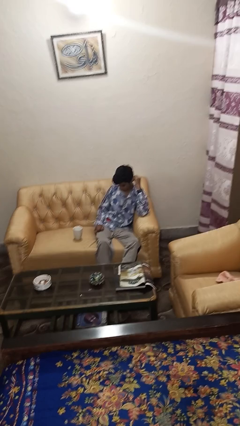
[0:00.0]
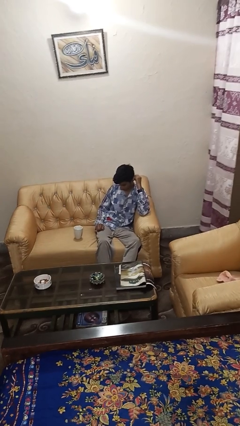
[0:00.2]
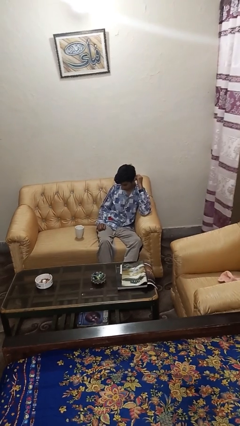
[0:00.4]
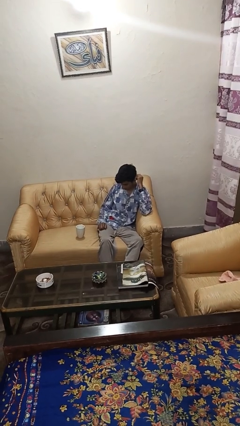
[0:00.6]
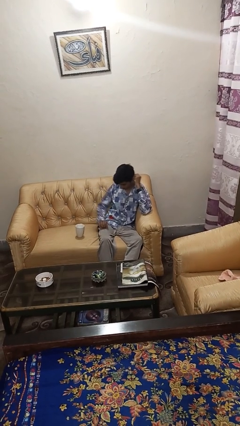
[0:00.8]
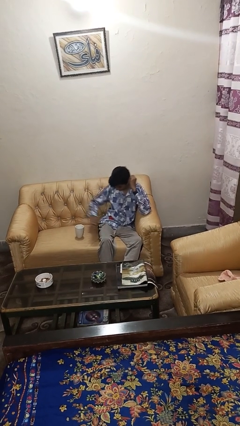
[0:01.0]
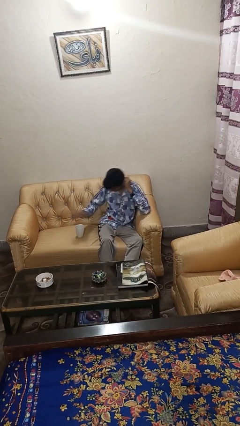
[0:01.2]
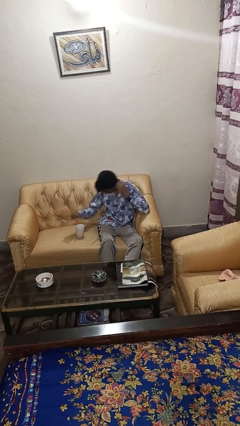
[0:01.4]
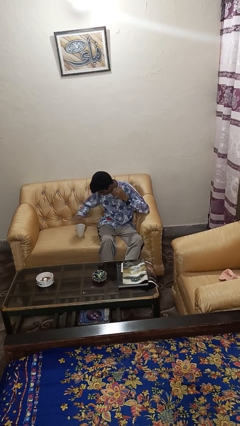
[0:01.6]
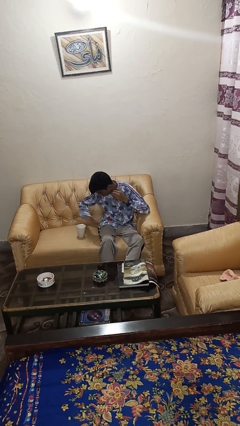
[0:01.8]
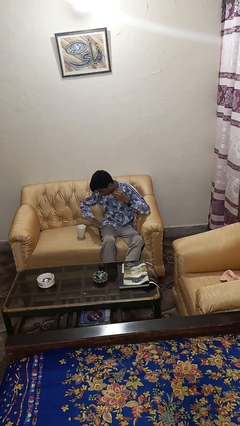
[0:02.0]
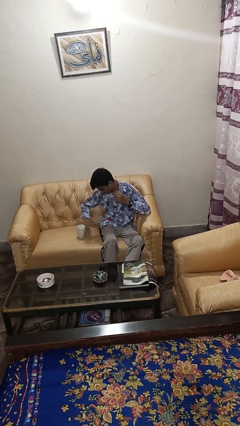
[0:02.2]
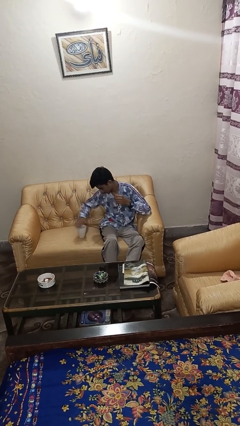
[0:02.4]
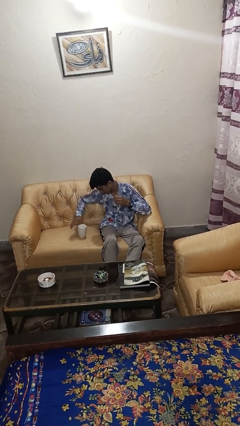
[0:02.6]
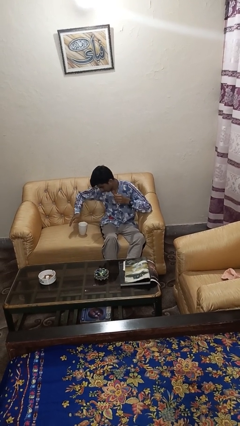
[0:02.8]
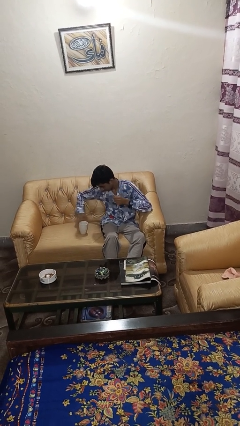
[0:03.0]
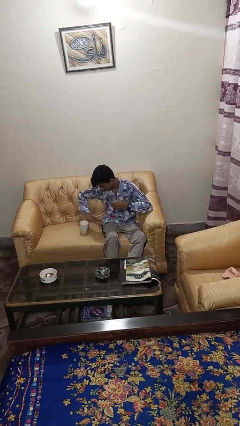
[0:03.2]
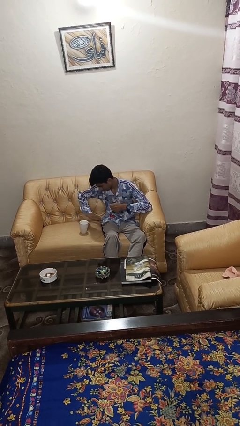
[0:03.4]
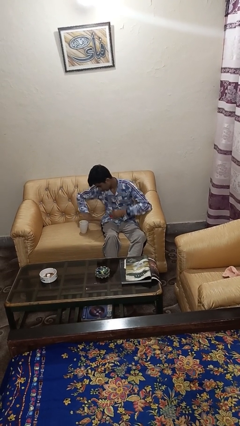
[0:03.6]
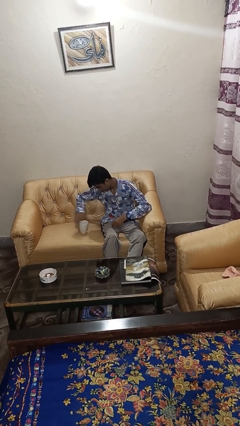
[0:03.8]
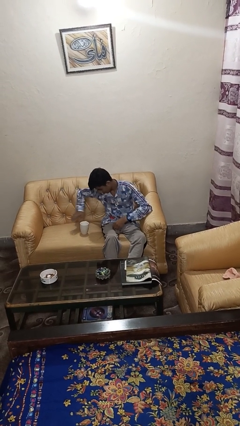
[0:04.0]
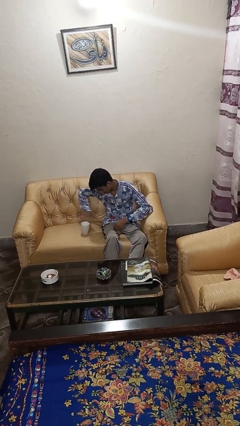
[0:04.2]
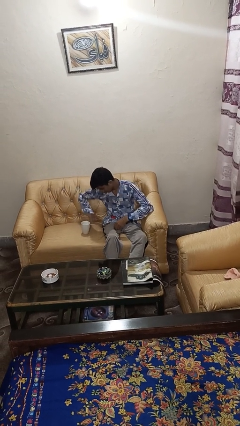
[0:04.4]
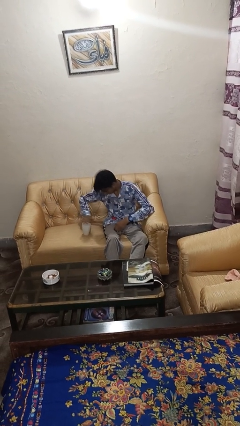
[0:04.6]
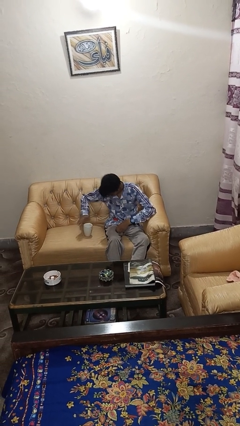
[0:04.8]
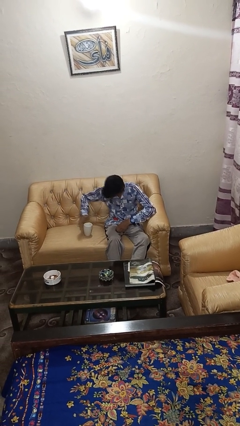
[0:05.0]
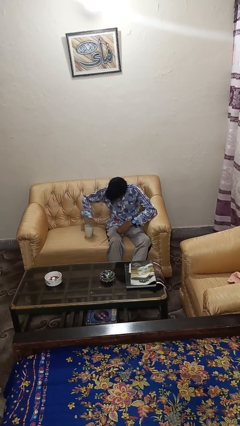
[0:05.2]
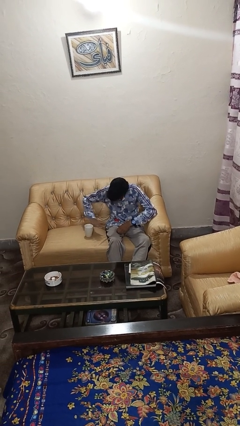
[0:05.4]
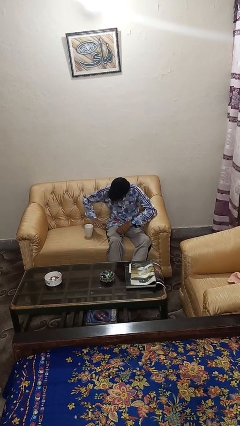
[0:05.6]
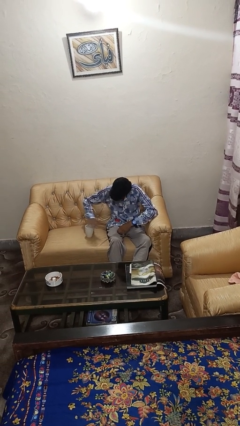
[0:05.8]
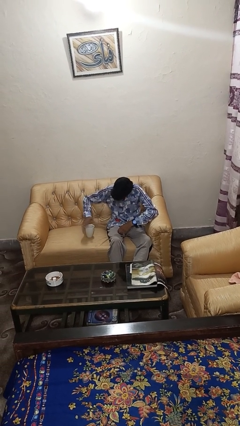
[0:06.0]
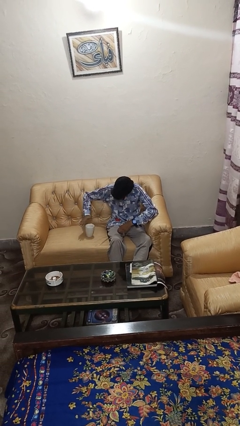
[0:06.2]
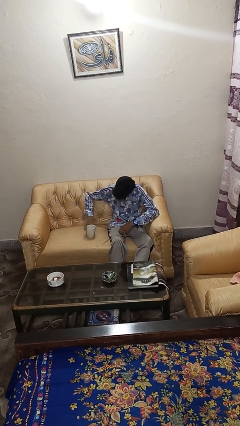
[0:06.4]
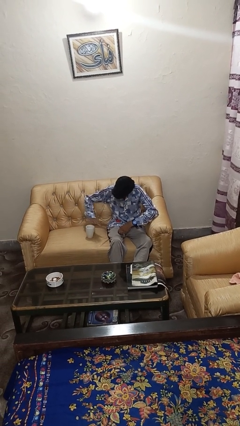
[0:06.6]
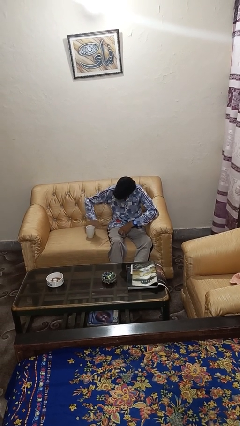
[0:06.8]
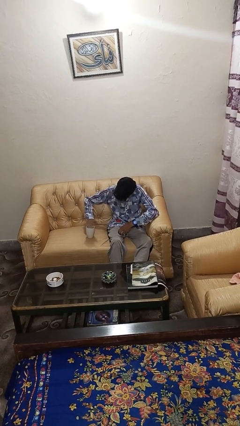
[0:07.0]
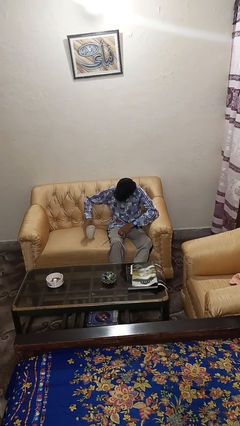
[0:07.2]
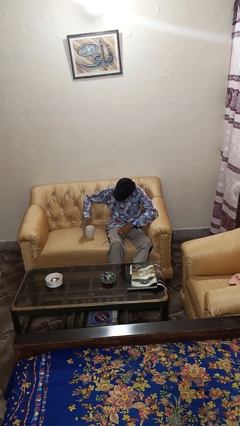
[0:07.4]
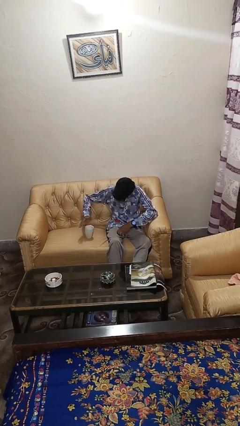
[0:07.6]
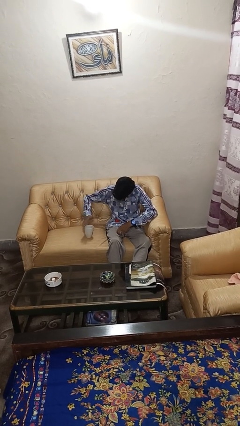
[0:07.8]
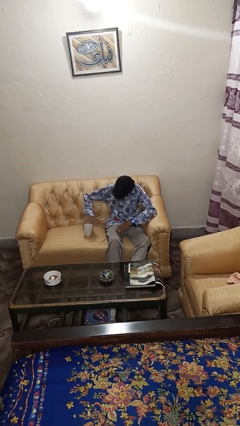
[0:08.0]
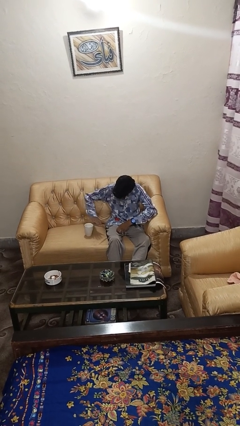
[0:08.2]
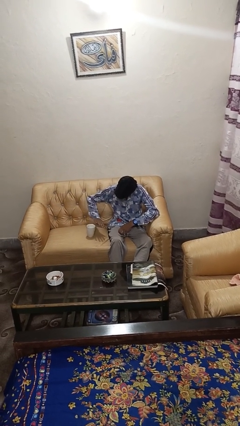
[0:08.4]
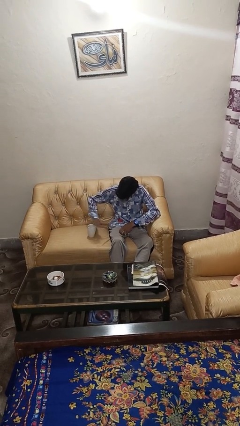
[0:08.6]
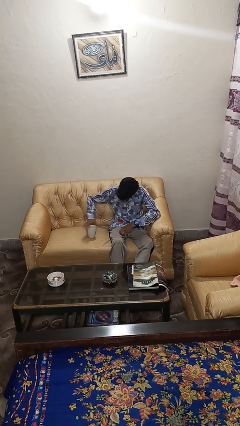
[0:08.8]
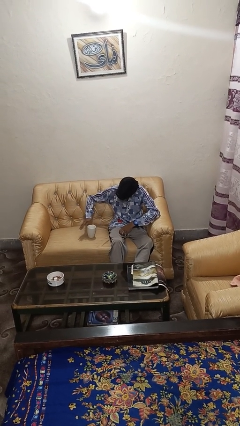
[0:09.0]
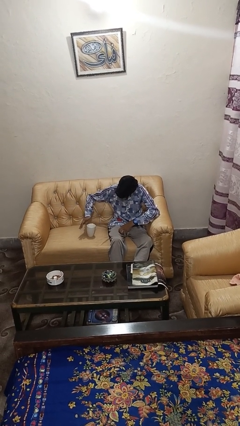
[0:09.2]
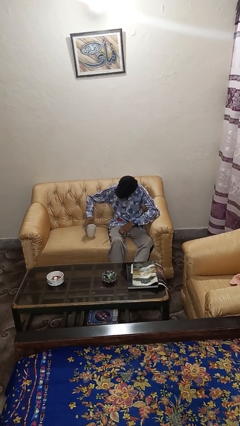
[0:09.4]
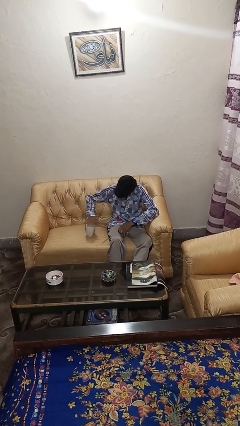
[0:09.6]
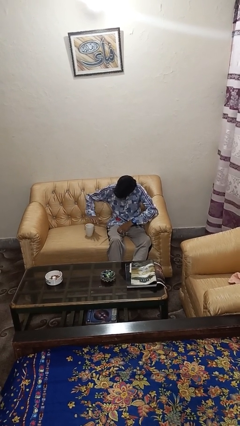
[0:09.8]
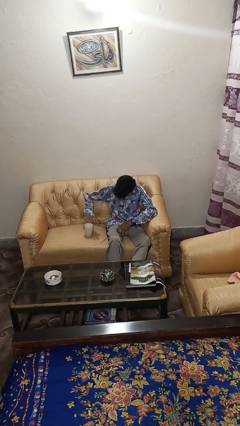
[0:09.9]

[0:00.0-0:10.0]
person waves hand over object

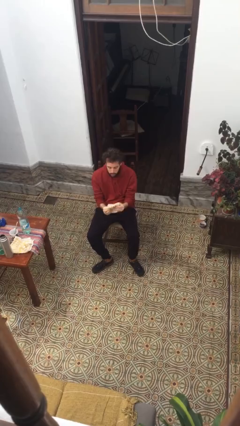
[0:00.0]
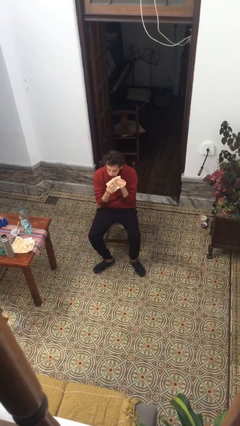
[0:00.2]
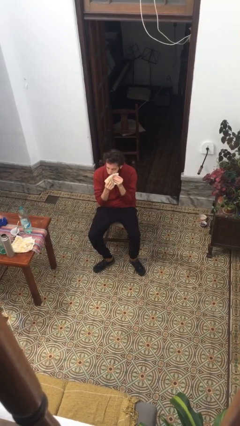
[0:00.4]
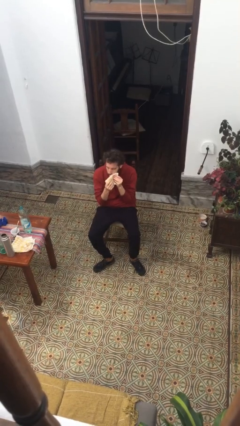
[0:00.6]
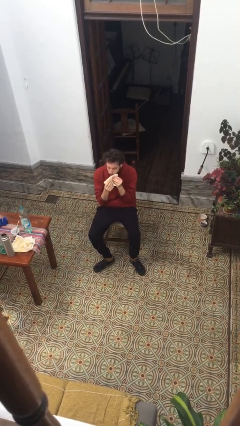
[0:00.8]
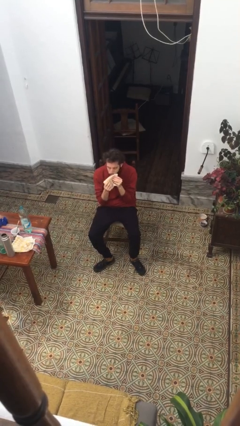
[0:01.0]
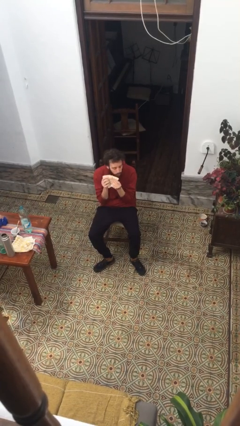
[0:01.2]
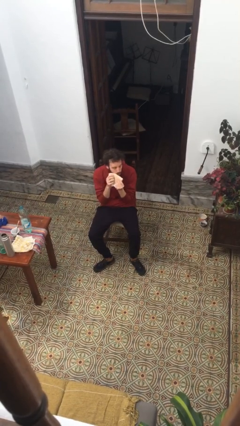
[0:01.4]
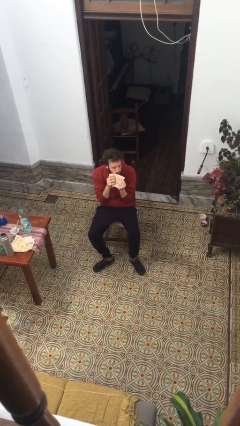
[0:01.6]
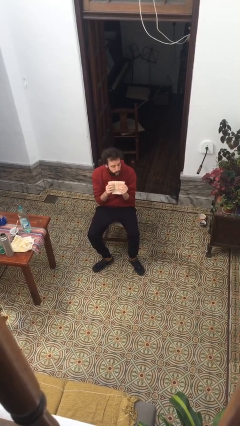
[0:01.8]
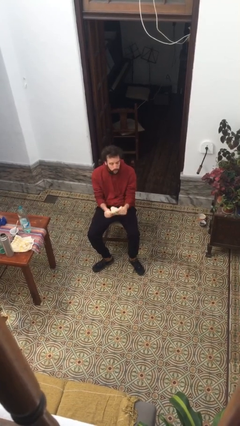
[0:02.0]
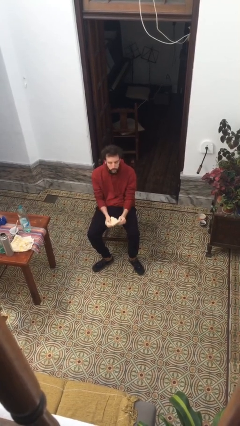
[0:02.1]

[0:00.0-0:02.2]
person wipes mouth with napkin

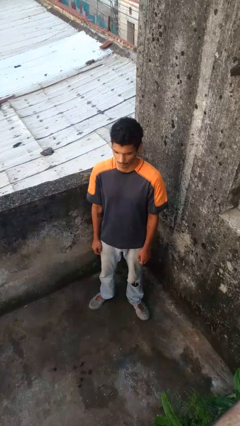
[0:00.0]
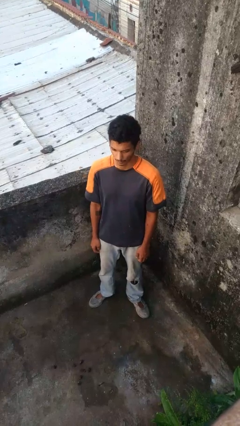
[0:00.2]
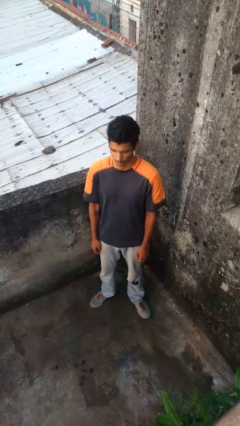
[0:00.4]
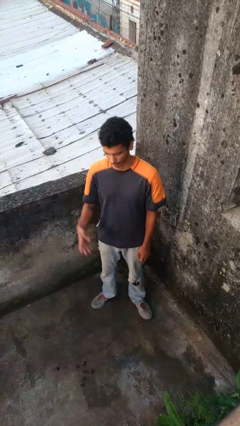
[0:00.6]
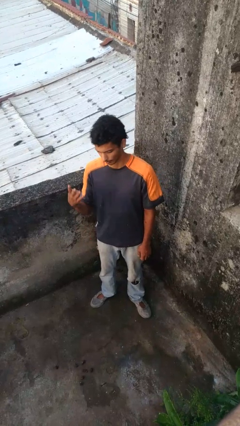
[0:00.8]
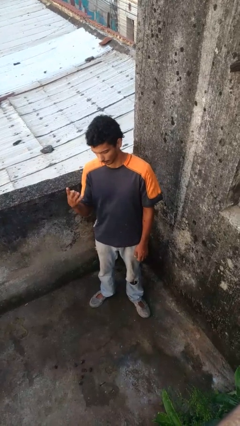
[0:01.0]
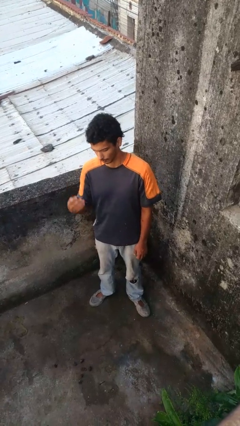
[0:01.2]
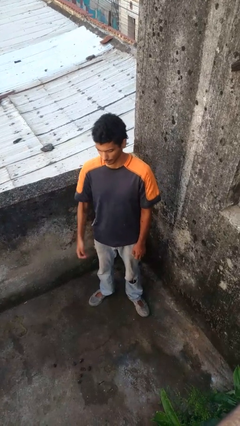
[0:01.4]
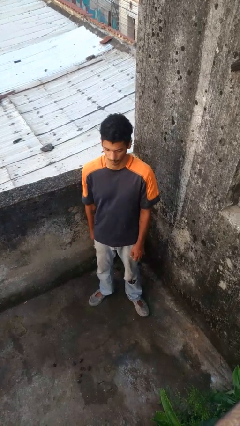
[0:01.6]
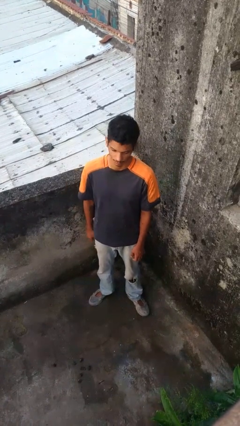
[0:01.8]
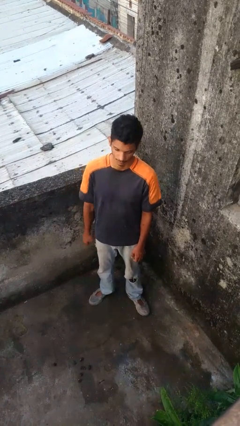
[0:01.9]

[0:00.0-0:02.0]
person gestures number four

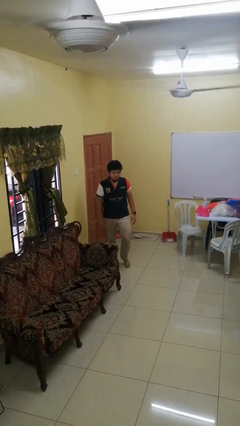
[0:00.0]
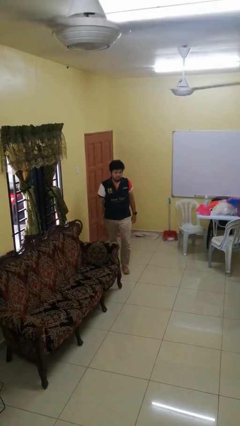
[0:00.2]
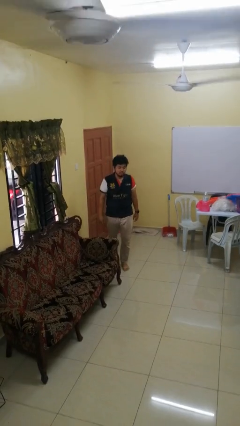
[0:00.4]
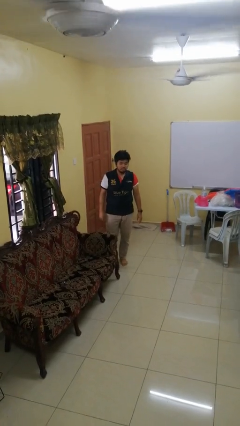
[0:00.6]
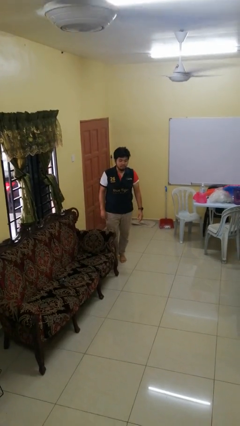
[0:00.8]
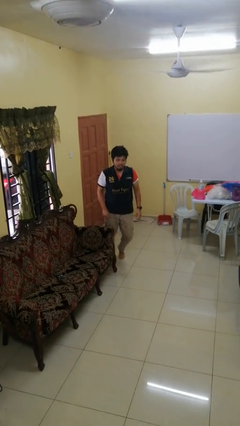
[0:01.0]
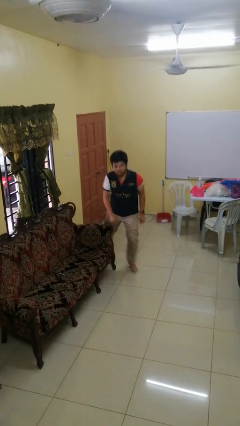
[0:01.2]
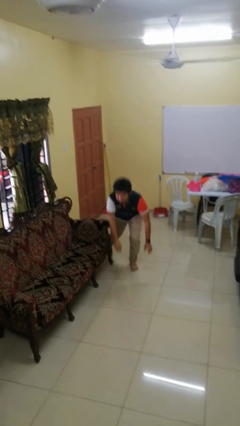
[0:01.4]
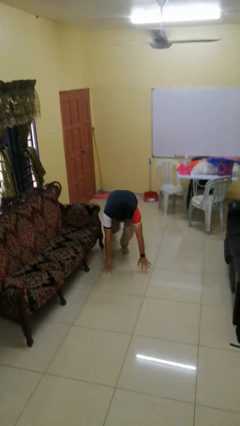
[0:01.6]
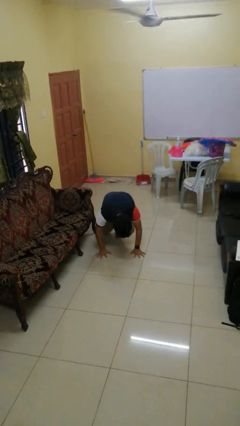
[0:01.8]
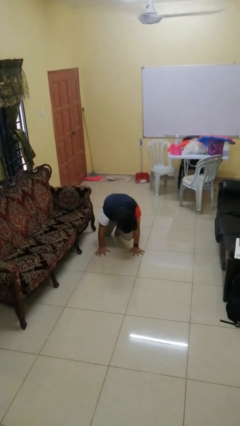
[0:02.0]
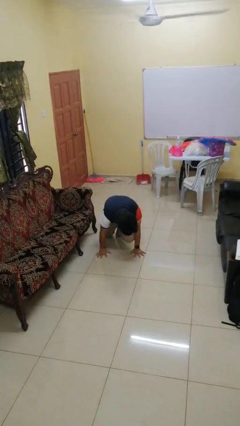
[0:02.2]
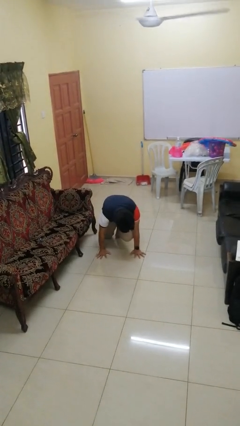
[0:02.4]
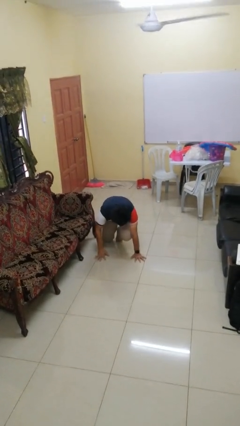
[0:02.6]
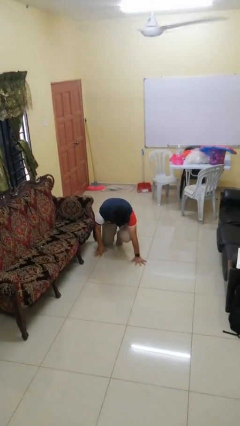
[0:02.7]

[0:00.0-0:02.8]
person trips on object on floor

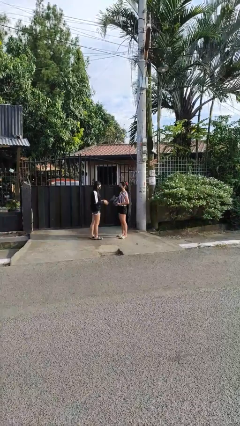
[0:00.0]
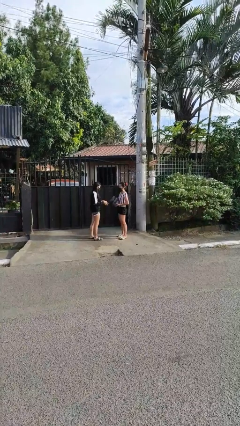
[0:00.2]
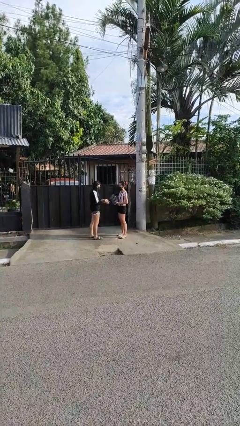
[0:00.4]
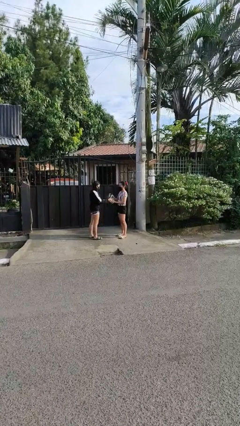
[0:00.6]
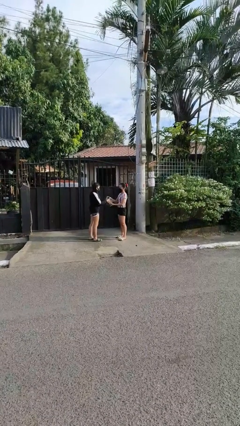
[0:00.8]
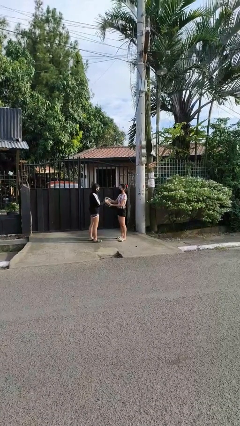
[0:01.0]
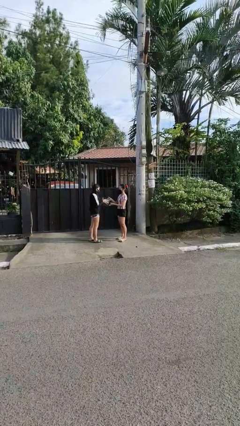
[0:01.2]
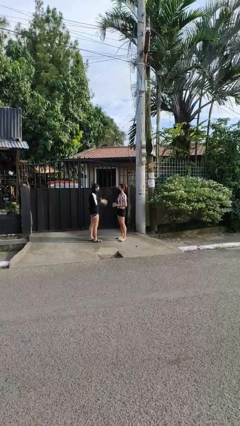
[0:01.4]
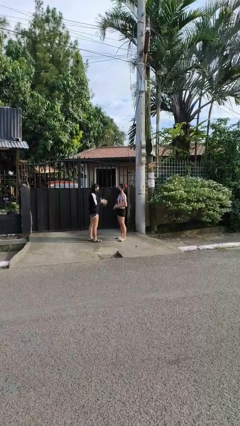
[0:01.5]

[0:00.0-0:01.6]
person transfers object to person
